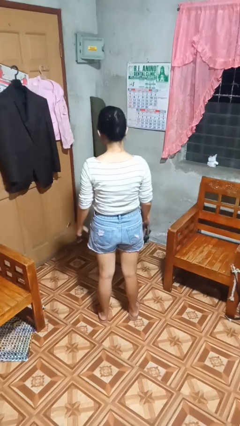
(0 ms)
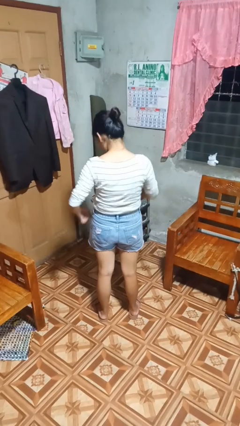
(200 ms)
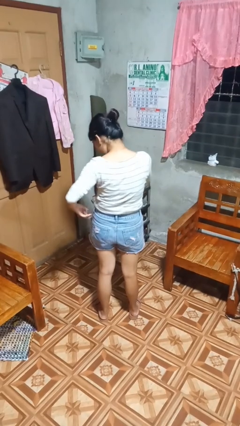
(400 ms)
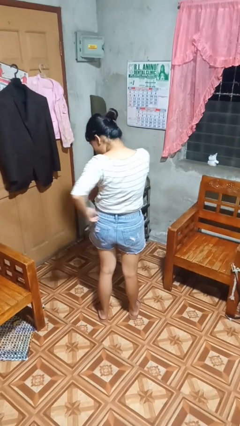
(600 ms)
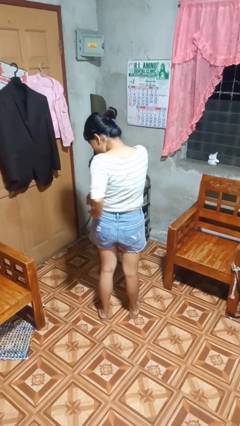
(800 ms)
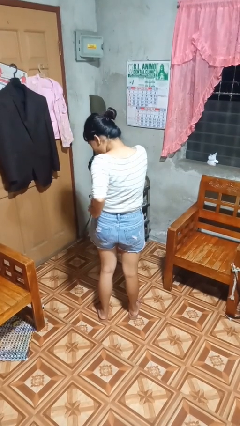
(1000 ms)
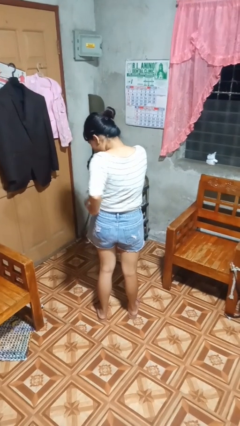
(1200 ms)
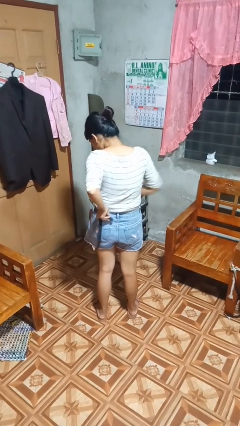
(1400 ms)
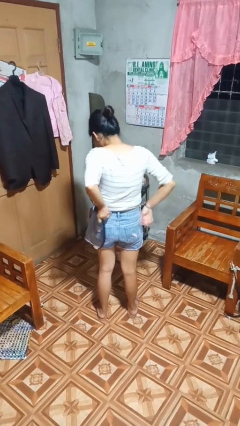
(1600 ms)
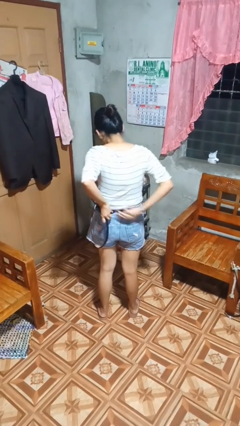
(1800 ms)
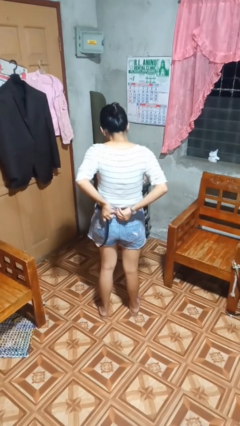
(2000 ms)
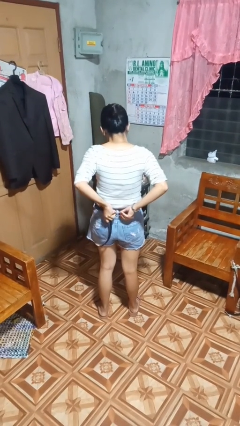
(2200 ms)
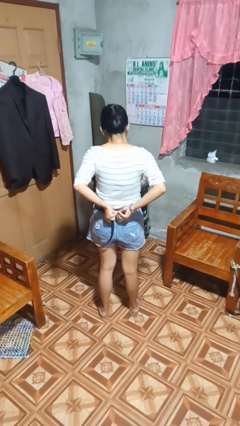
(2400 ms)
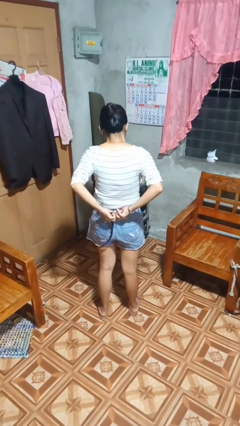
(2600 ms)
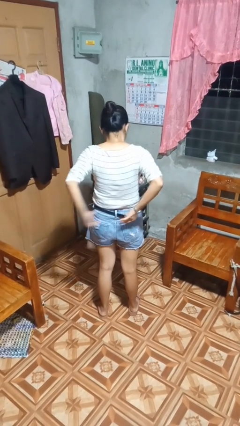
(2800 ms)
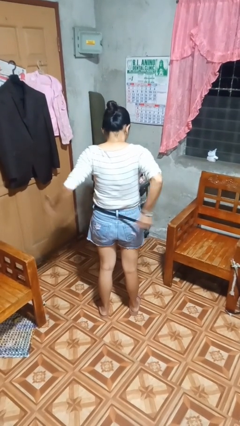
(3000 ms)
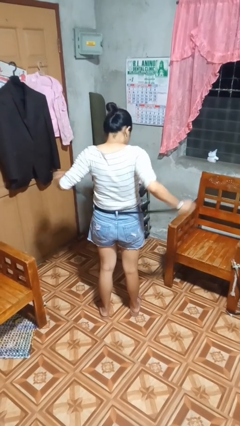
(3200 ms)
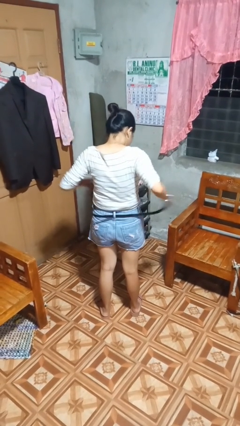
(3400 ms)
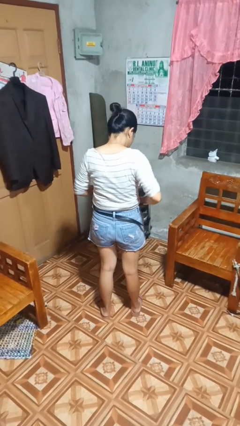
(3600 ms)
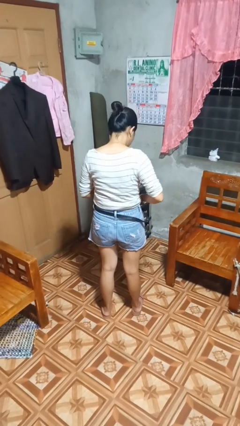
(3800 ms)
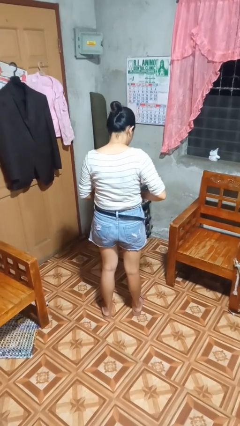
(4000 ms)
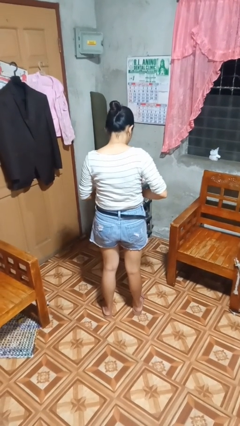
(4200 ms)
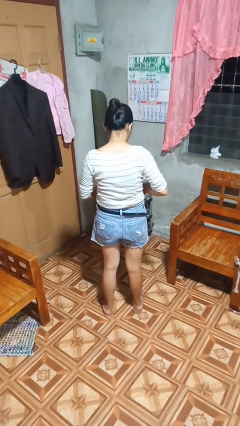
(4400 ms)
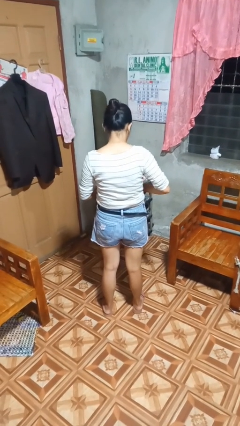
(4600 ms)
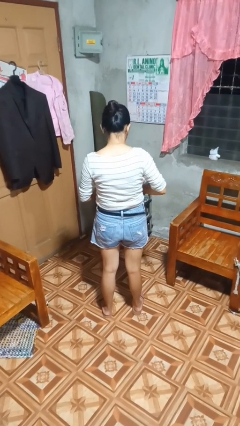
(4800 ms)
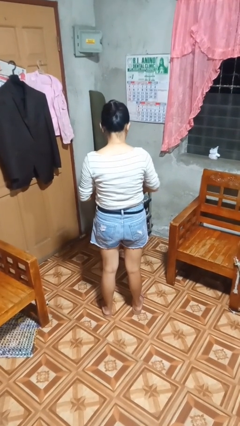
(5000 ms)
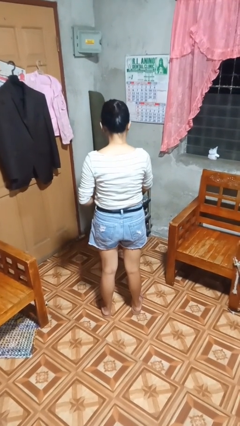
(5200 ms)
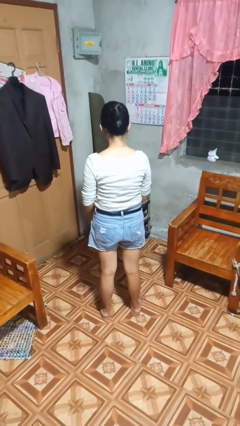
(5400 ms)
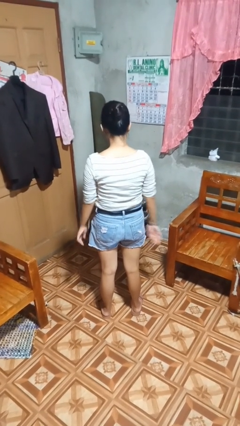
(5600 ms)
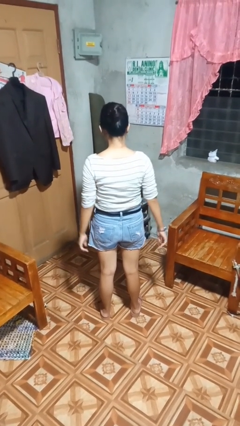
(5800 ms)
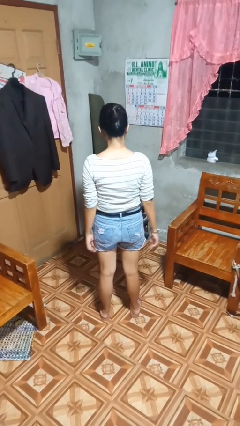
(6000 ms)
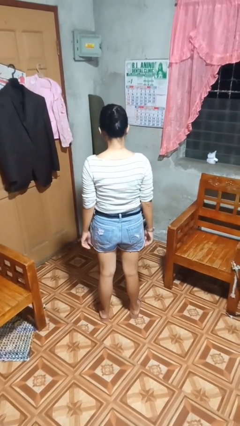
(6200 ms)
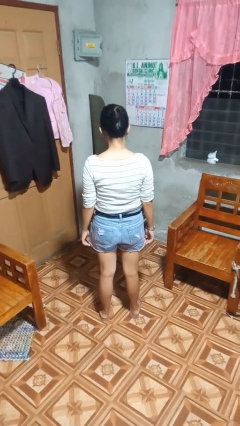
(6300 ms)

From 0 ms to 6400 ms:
person puts on belt

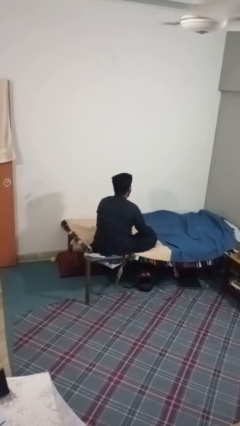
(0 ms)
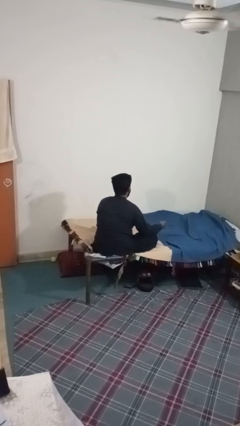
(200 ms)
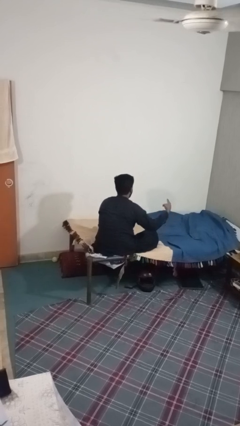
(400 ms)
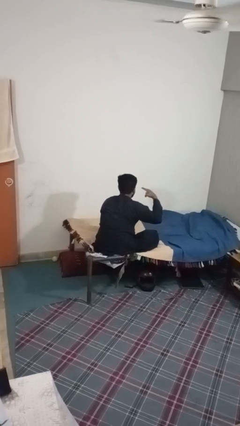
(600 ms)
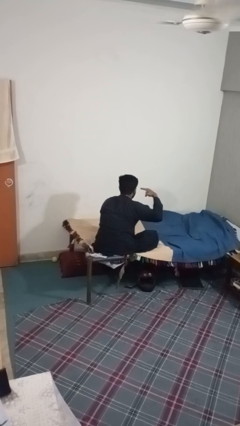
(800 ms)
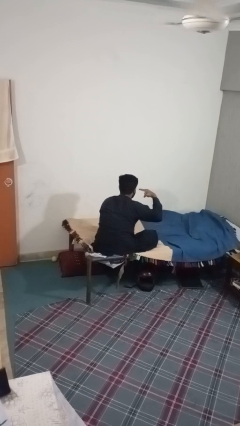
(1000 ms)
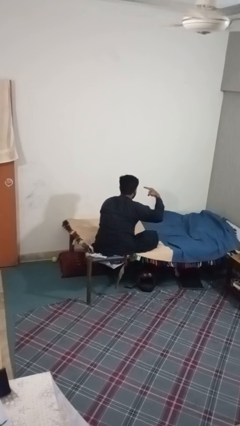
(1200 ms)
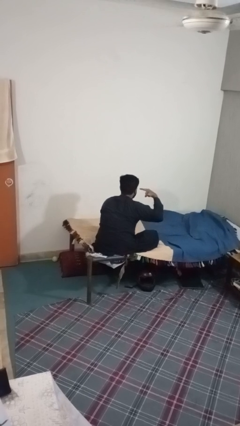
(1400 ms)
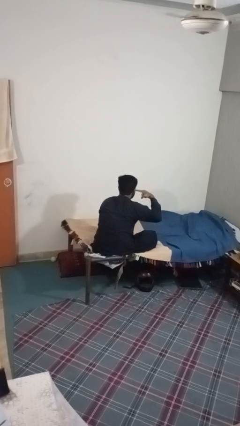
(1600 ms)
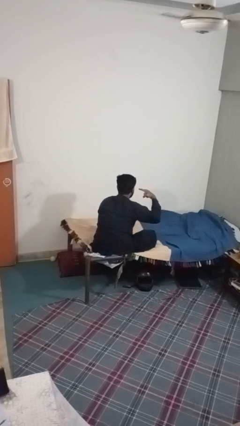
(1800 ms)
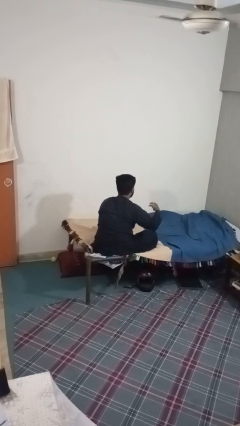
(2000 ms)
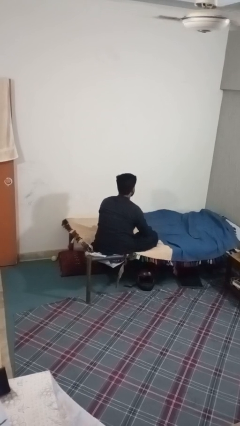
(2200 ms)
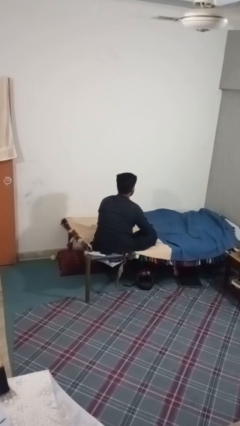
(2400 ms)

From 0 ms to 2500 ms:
person gestures listen closely

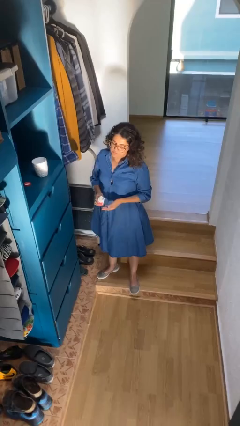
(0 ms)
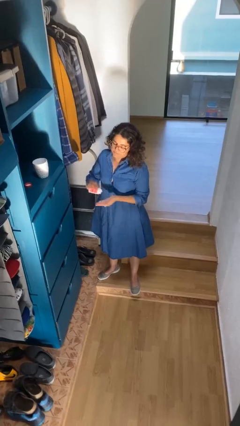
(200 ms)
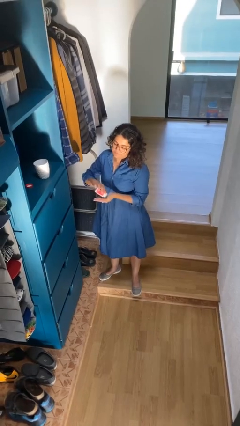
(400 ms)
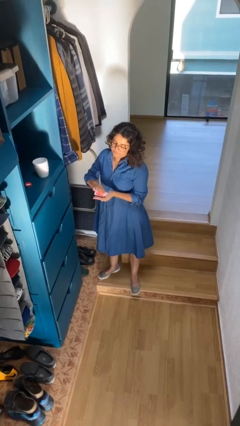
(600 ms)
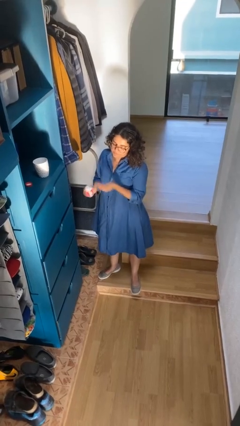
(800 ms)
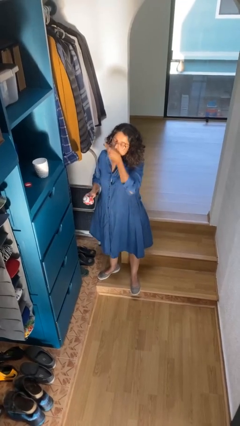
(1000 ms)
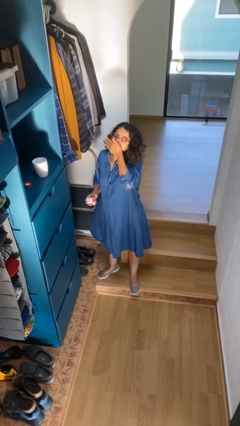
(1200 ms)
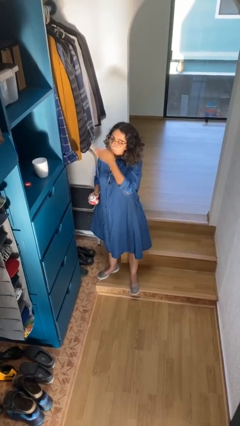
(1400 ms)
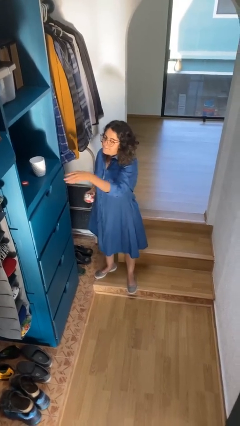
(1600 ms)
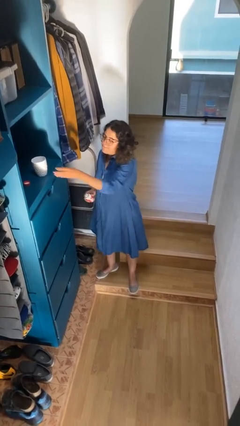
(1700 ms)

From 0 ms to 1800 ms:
person takes medicine pills

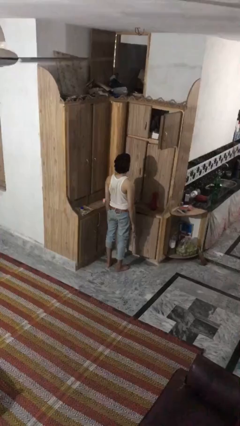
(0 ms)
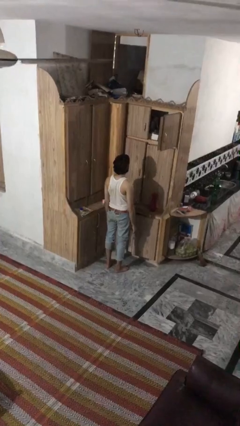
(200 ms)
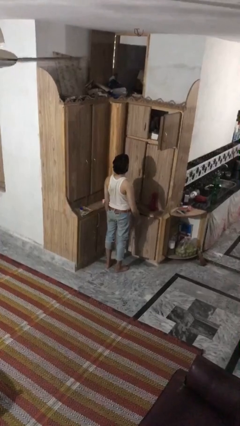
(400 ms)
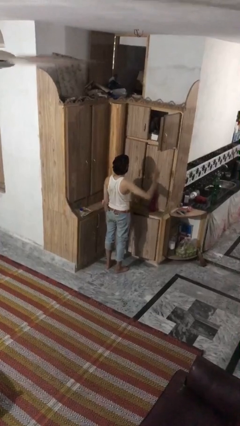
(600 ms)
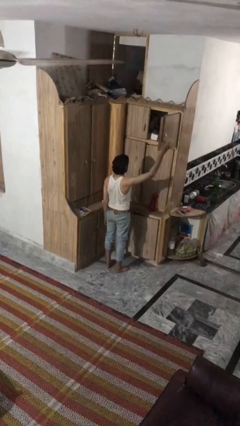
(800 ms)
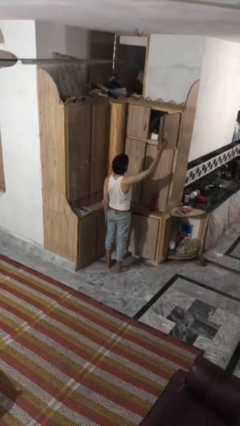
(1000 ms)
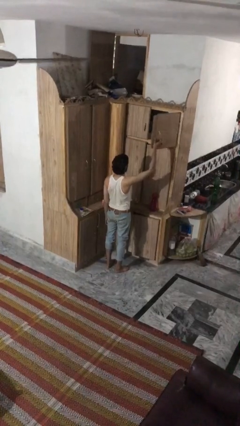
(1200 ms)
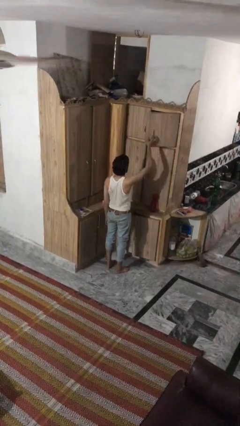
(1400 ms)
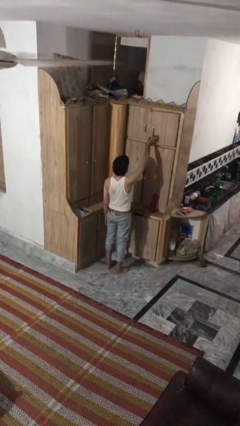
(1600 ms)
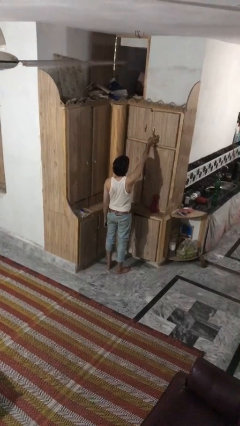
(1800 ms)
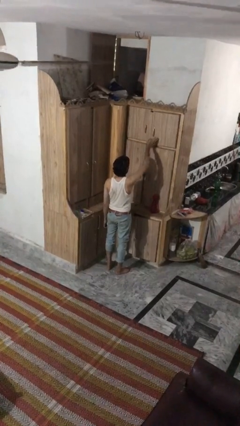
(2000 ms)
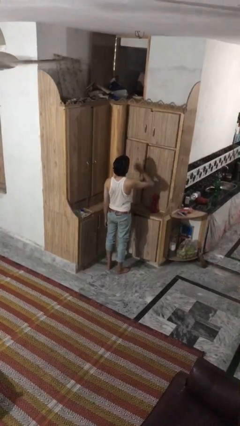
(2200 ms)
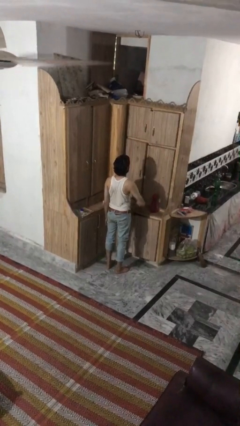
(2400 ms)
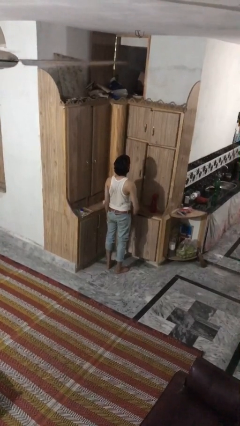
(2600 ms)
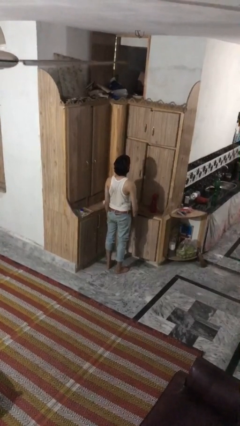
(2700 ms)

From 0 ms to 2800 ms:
person closes cabinet

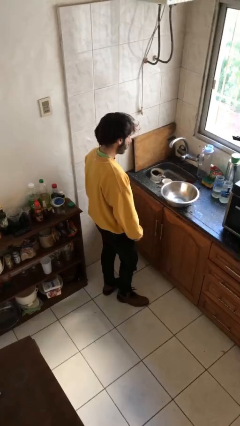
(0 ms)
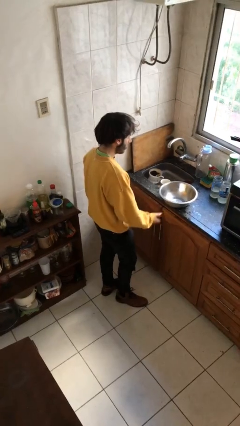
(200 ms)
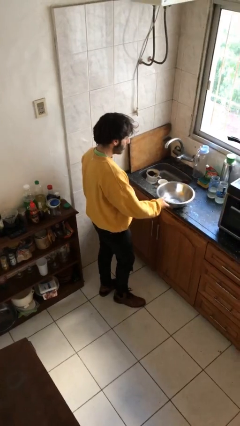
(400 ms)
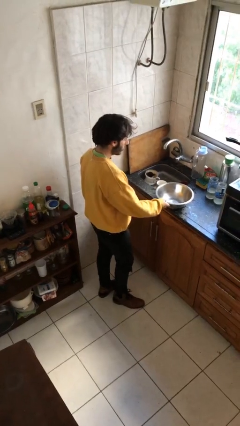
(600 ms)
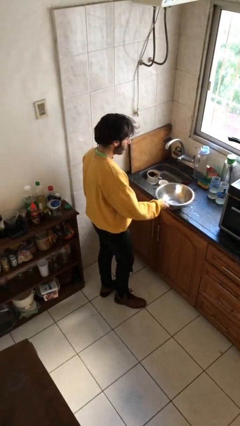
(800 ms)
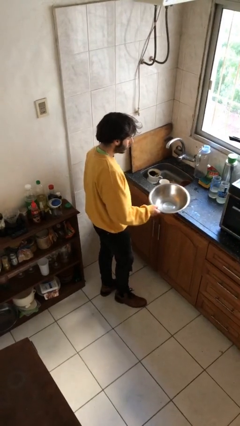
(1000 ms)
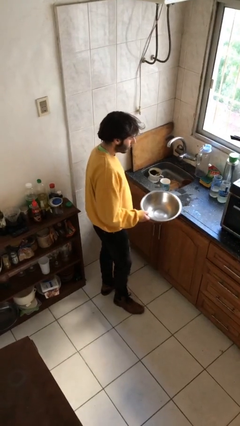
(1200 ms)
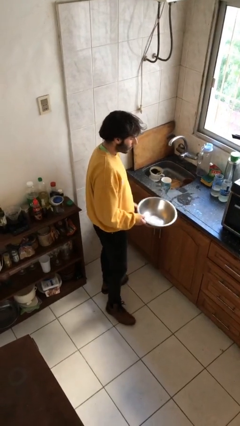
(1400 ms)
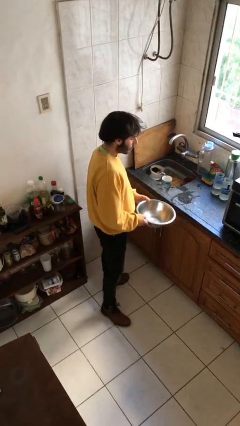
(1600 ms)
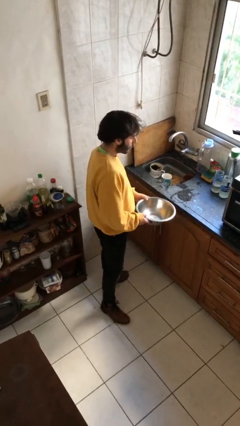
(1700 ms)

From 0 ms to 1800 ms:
person picks up object from countertop

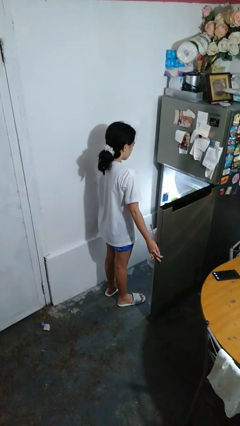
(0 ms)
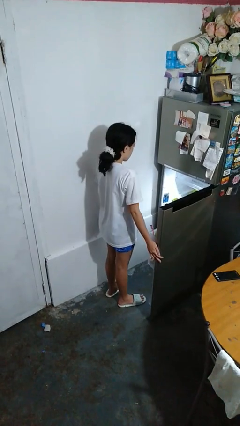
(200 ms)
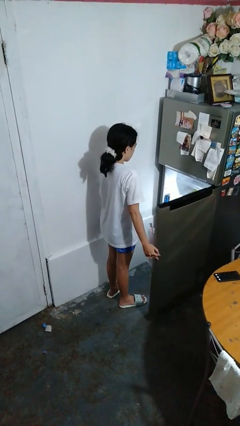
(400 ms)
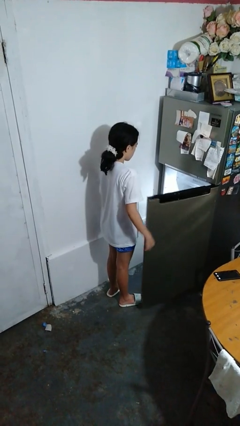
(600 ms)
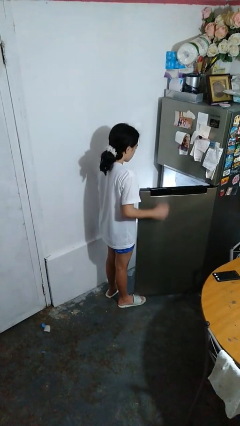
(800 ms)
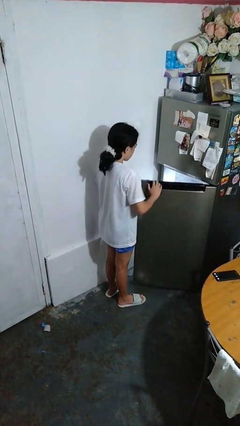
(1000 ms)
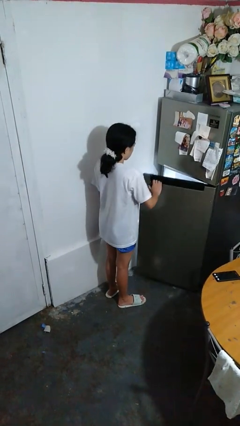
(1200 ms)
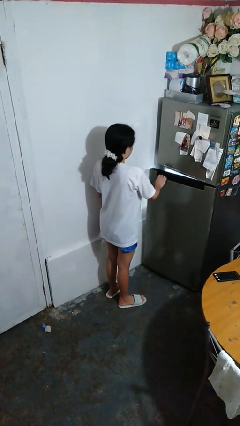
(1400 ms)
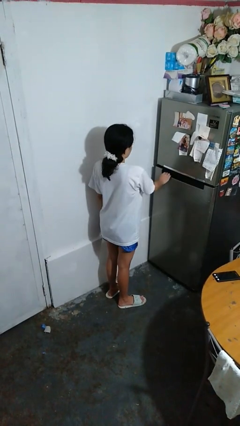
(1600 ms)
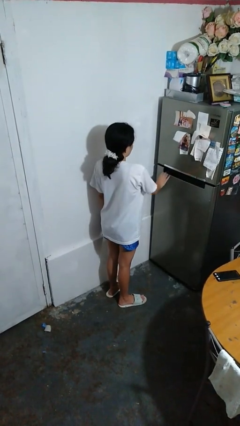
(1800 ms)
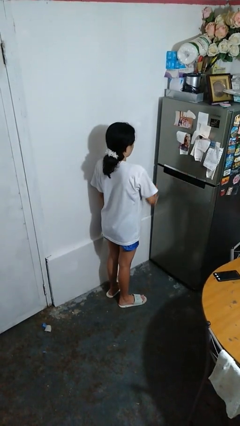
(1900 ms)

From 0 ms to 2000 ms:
person closes refrigerator

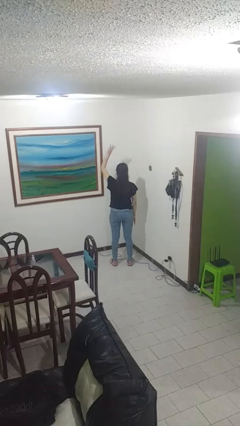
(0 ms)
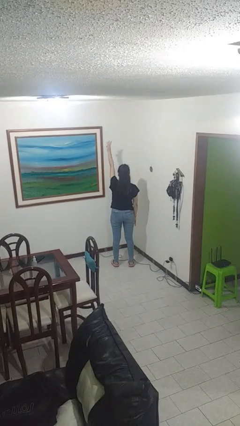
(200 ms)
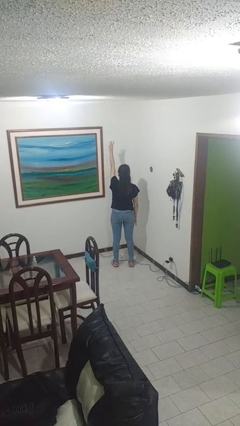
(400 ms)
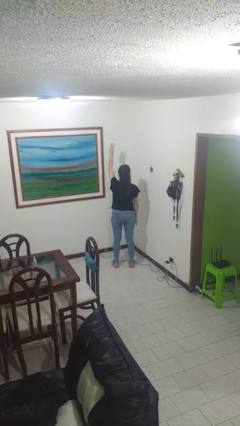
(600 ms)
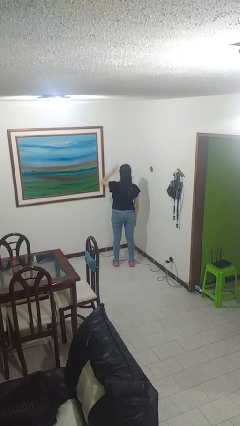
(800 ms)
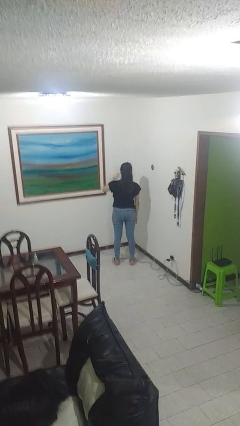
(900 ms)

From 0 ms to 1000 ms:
person gestures number three
